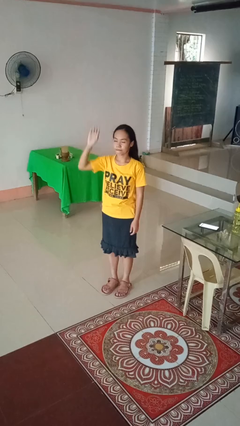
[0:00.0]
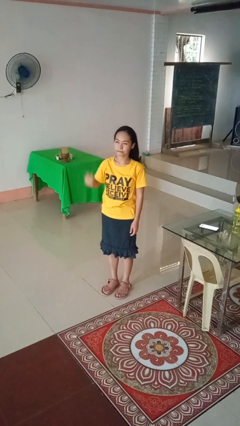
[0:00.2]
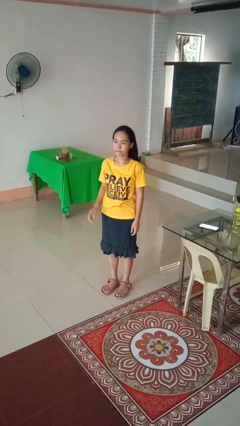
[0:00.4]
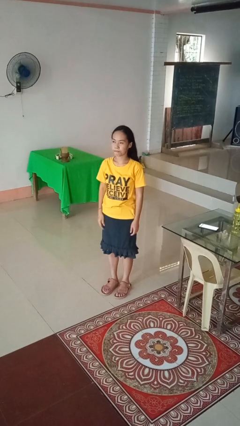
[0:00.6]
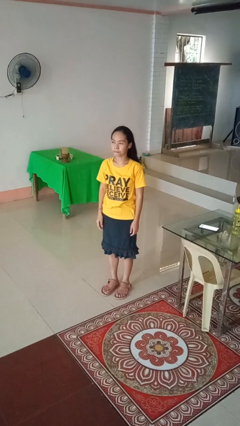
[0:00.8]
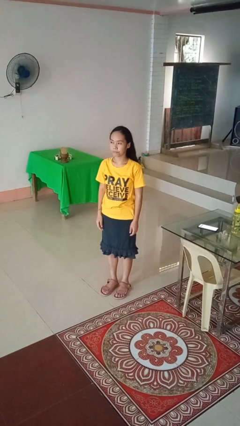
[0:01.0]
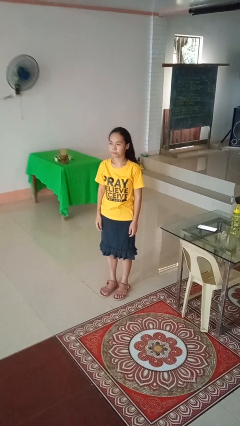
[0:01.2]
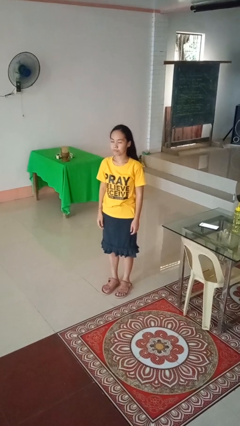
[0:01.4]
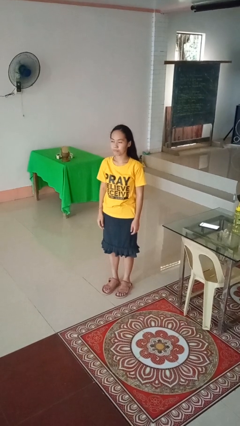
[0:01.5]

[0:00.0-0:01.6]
person gestures lower hand

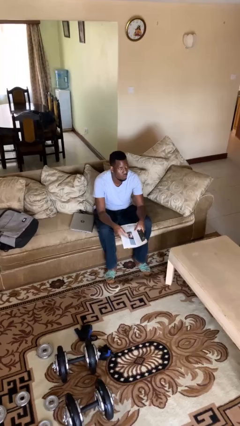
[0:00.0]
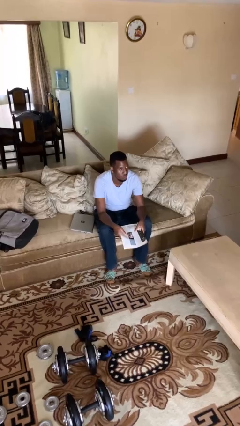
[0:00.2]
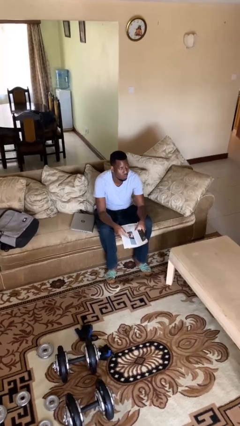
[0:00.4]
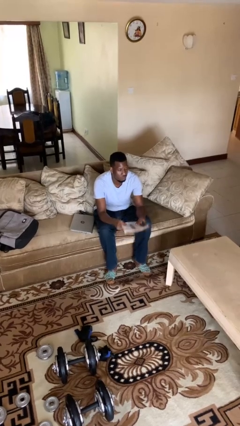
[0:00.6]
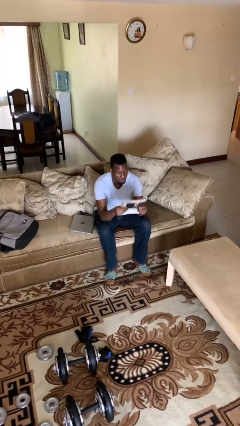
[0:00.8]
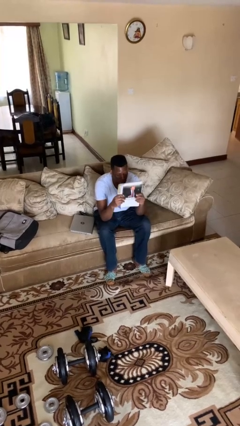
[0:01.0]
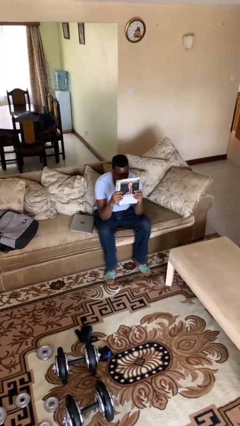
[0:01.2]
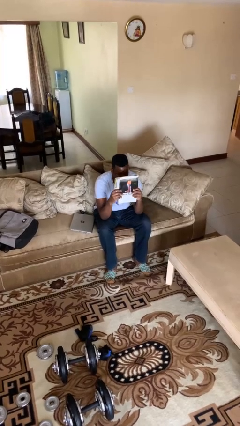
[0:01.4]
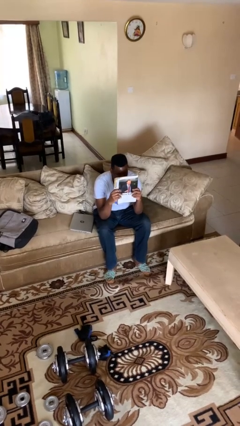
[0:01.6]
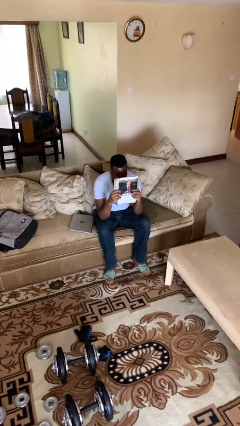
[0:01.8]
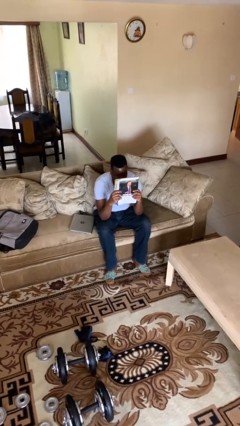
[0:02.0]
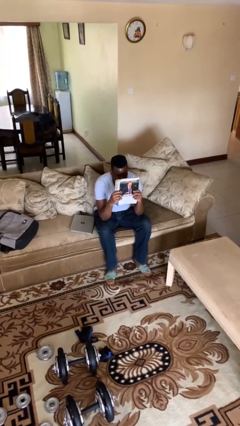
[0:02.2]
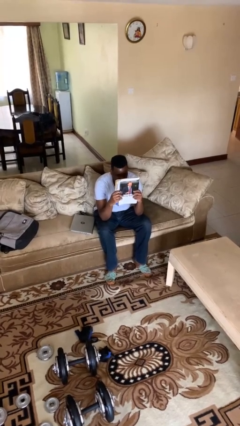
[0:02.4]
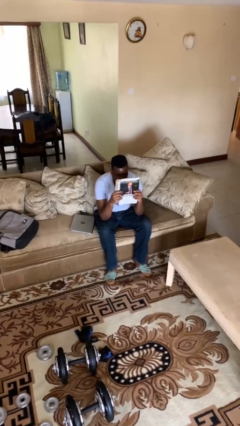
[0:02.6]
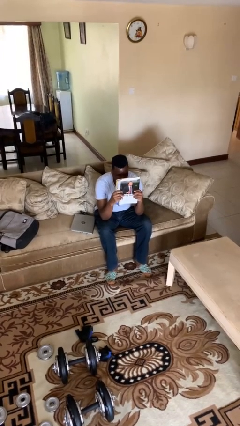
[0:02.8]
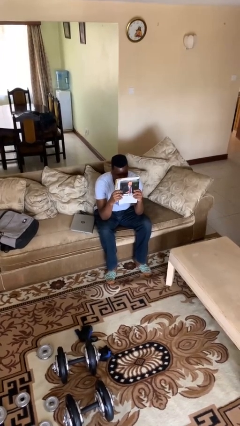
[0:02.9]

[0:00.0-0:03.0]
person reads document

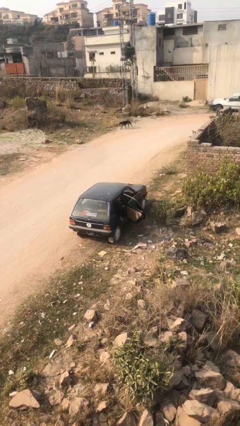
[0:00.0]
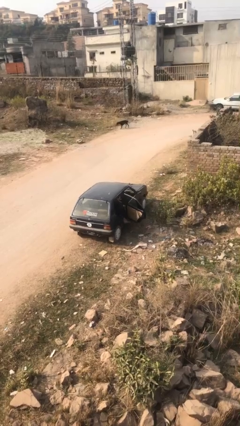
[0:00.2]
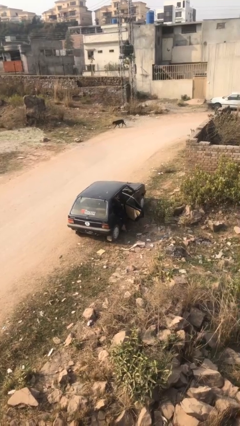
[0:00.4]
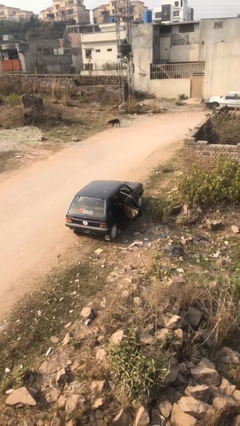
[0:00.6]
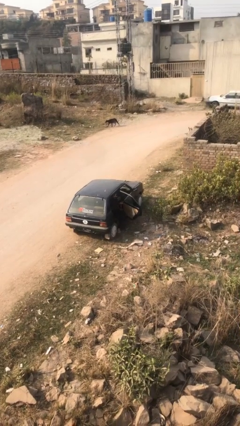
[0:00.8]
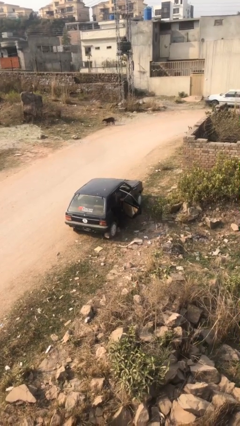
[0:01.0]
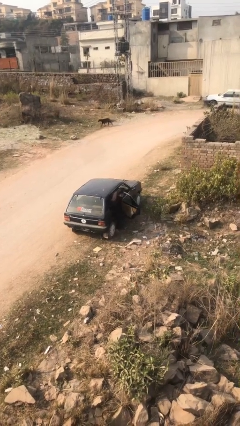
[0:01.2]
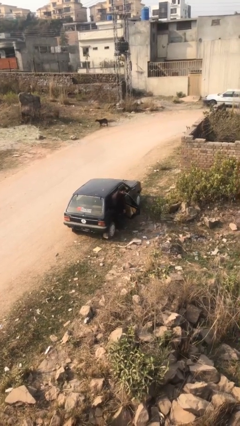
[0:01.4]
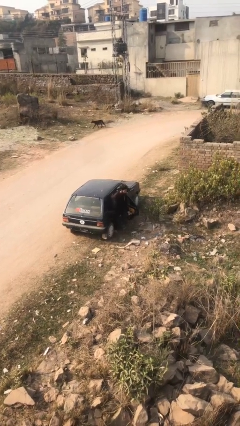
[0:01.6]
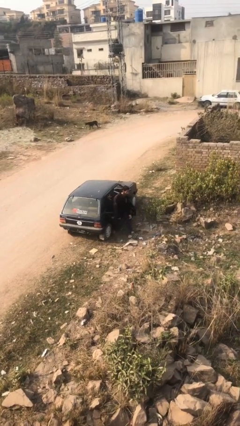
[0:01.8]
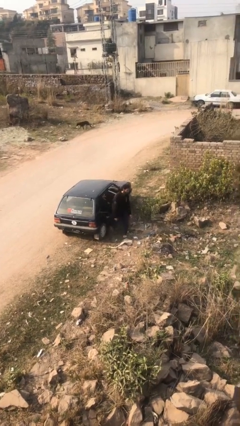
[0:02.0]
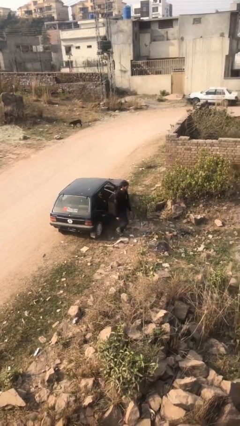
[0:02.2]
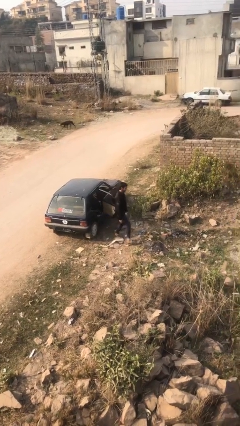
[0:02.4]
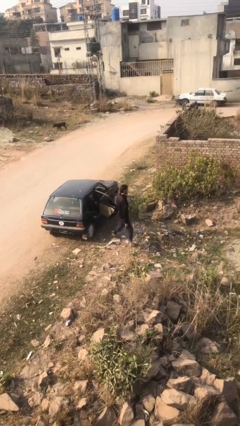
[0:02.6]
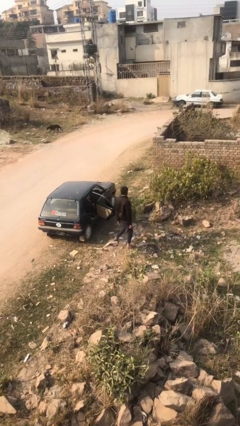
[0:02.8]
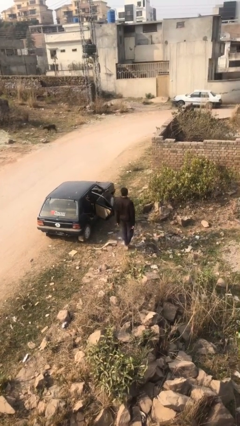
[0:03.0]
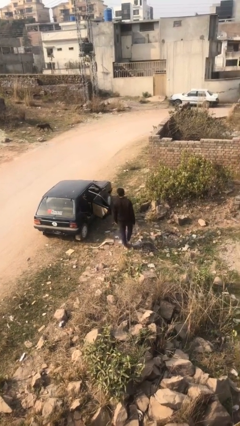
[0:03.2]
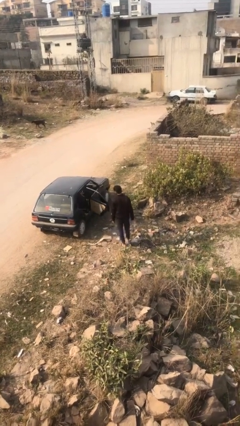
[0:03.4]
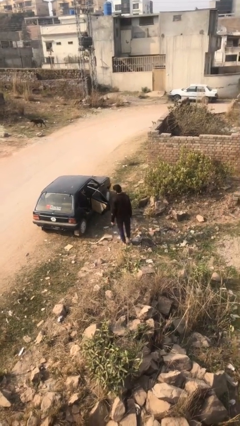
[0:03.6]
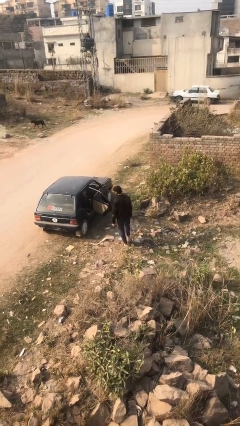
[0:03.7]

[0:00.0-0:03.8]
person exits car

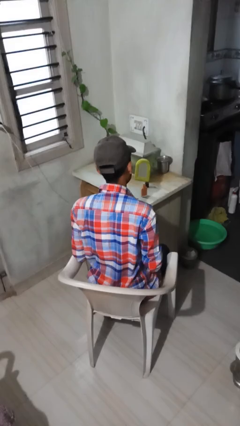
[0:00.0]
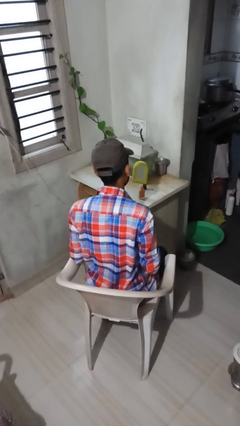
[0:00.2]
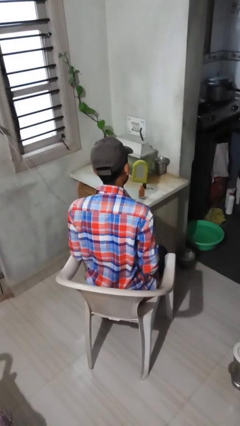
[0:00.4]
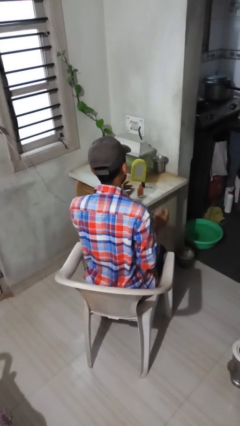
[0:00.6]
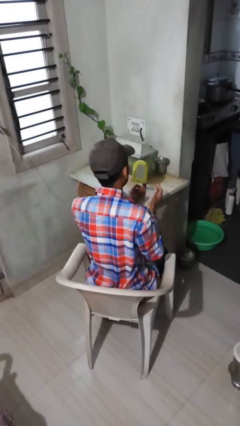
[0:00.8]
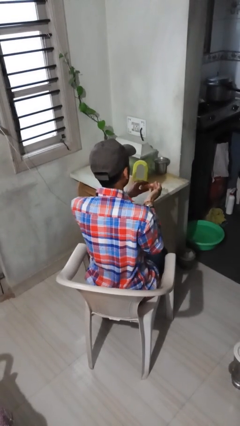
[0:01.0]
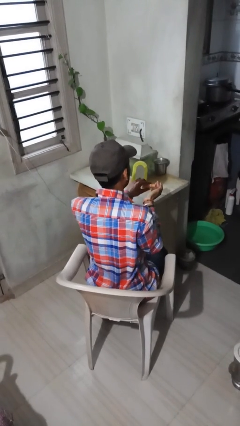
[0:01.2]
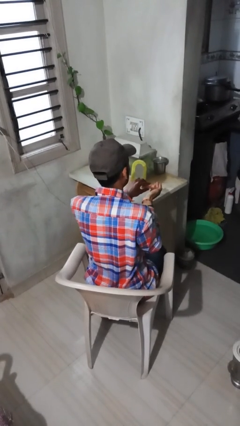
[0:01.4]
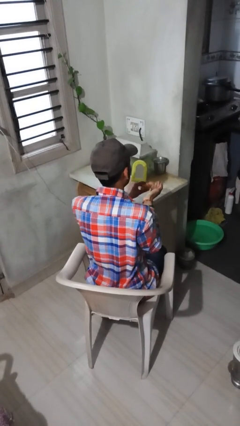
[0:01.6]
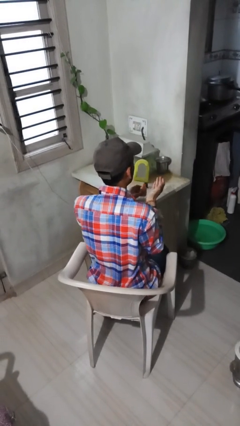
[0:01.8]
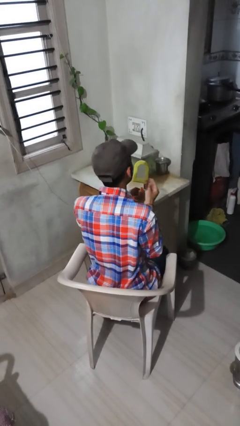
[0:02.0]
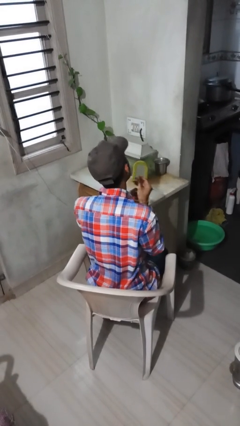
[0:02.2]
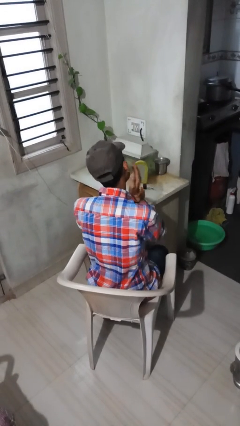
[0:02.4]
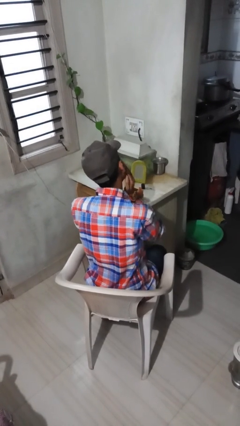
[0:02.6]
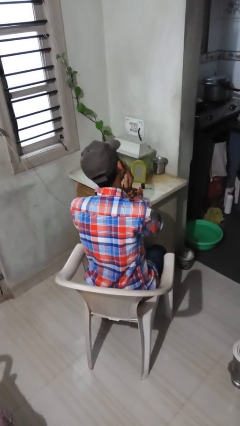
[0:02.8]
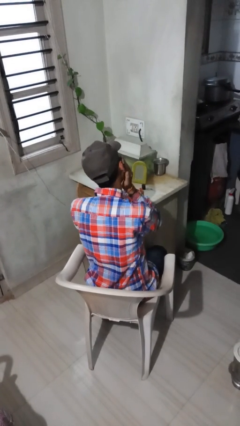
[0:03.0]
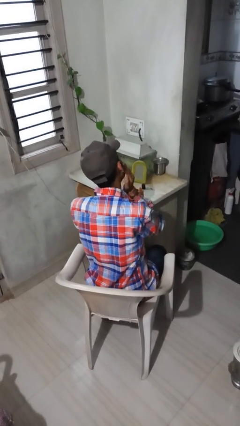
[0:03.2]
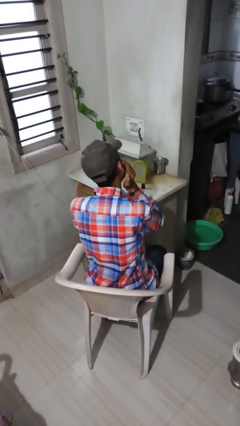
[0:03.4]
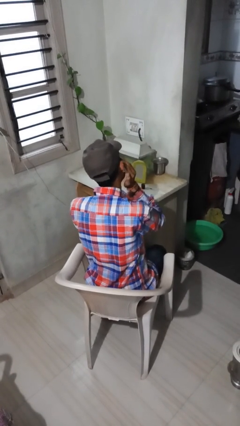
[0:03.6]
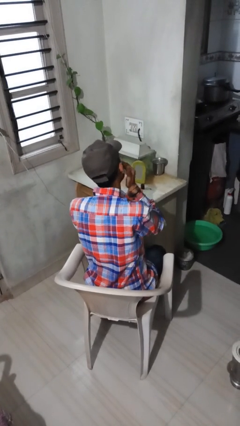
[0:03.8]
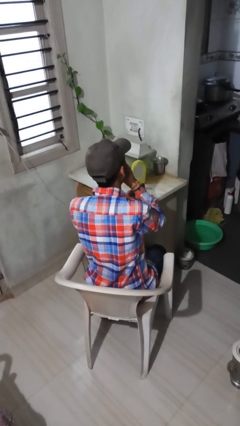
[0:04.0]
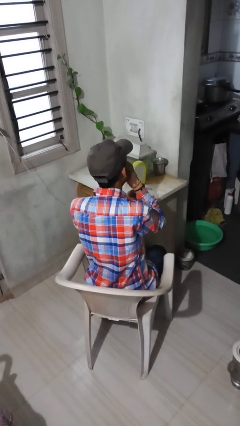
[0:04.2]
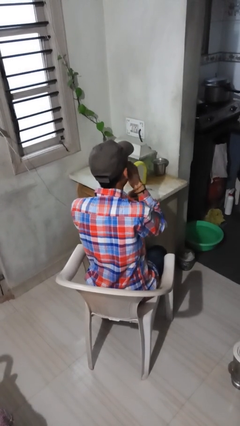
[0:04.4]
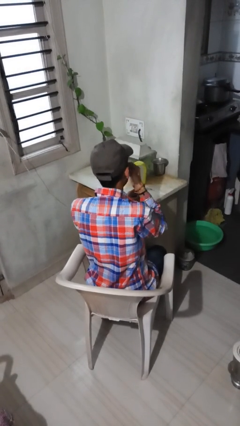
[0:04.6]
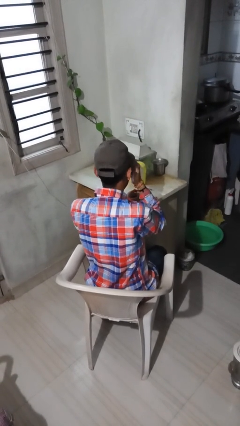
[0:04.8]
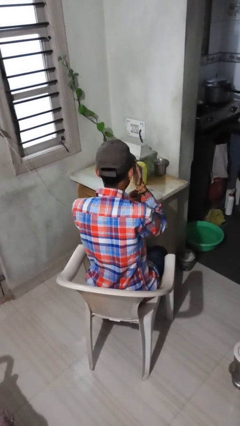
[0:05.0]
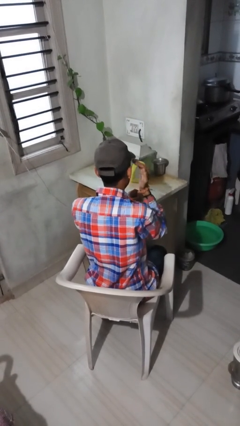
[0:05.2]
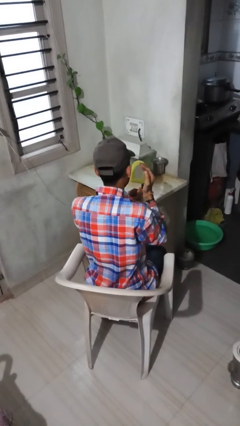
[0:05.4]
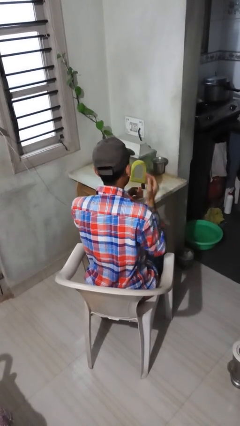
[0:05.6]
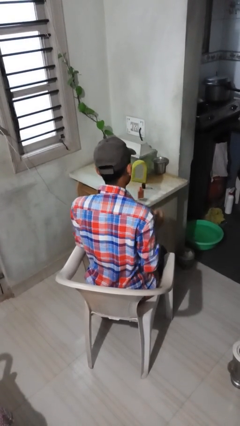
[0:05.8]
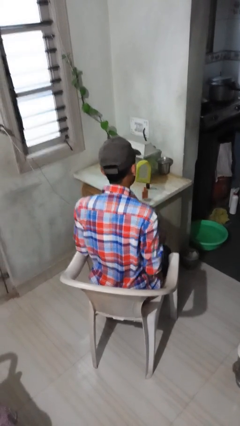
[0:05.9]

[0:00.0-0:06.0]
person applies foundation makeup

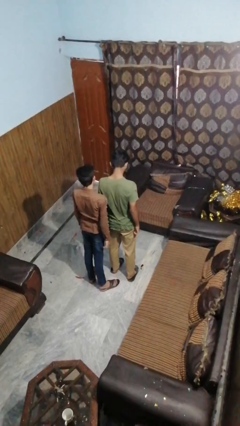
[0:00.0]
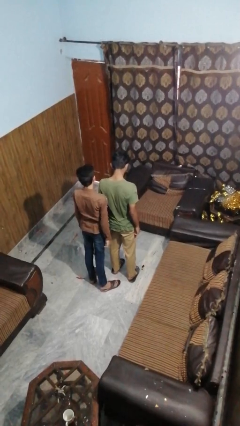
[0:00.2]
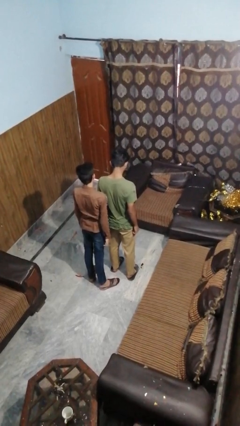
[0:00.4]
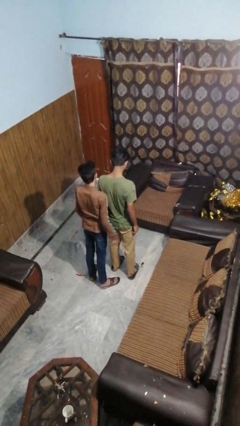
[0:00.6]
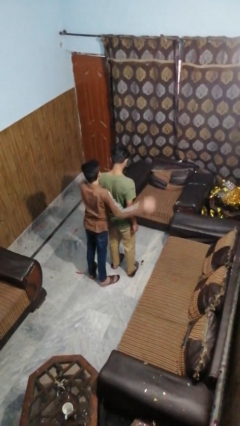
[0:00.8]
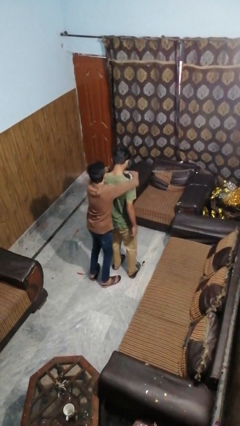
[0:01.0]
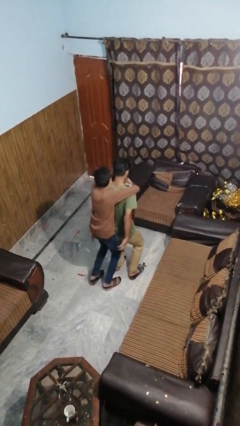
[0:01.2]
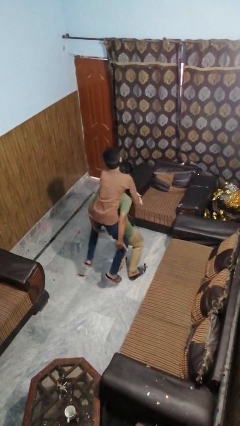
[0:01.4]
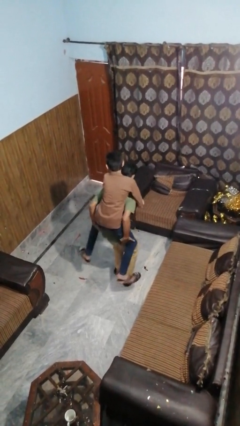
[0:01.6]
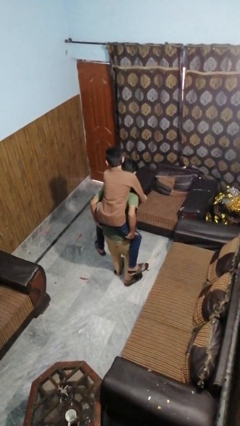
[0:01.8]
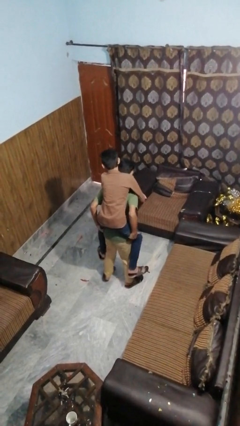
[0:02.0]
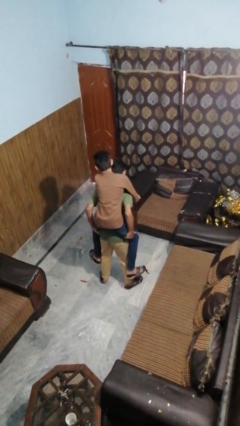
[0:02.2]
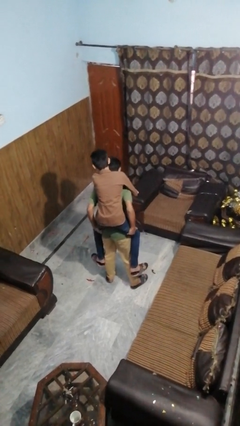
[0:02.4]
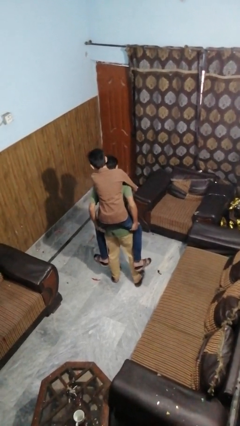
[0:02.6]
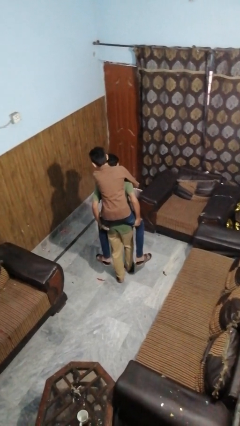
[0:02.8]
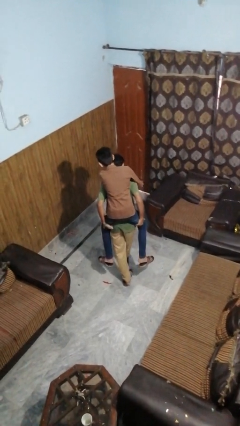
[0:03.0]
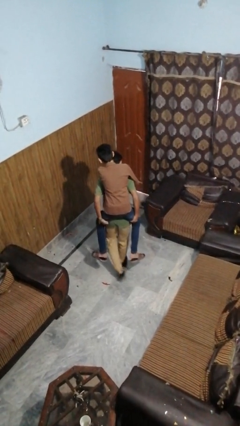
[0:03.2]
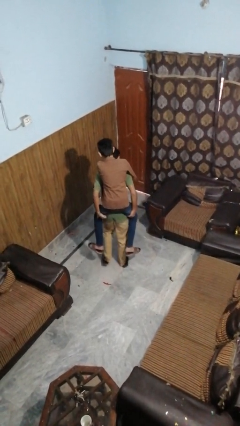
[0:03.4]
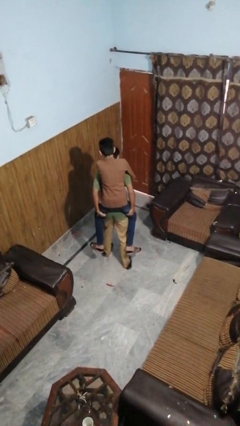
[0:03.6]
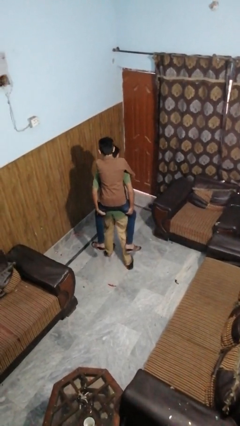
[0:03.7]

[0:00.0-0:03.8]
person carries person on back
